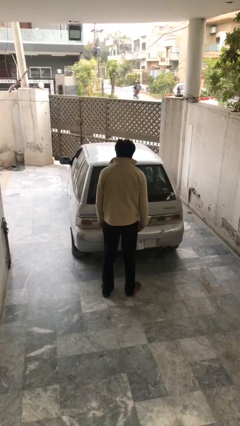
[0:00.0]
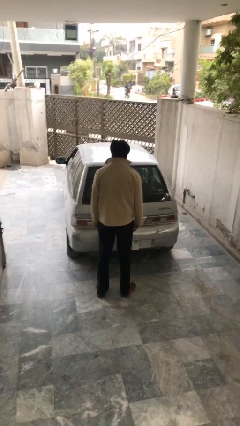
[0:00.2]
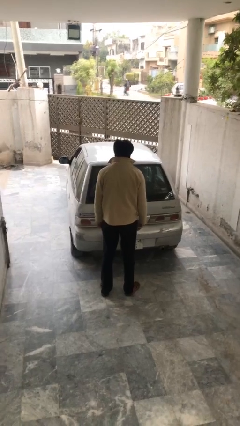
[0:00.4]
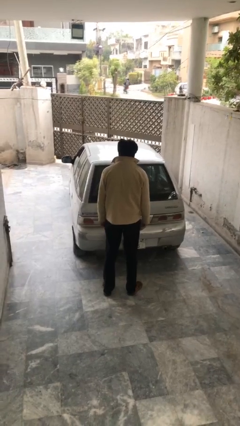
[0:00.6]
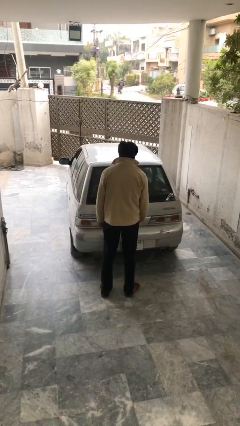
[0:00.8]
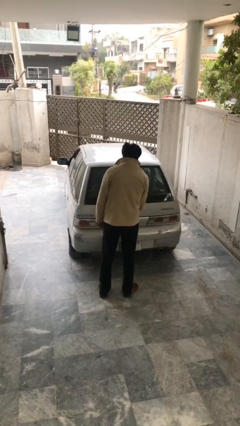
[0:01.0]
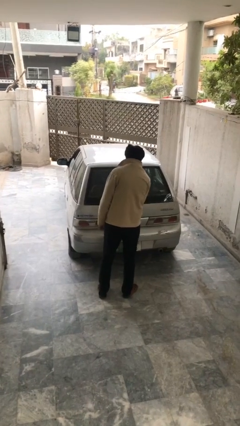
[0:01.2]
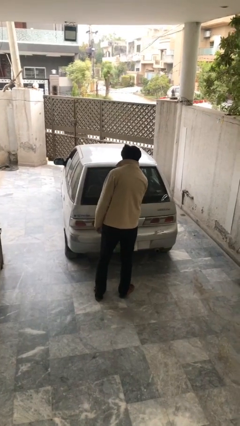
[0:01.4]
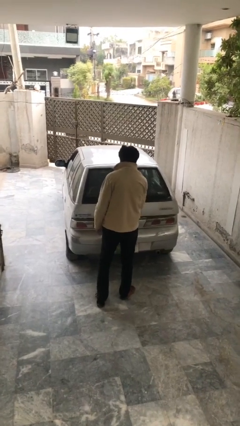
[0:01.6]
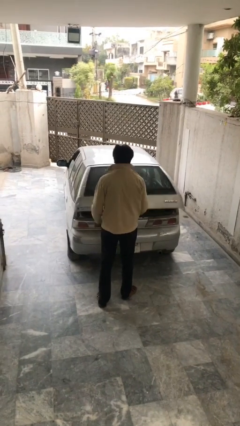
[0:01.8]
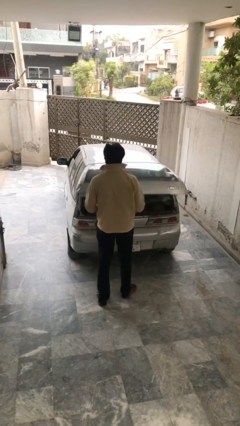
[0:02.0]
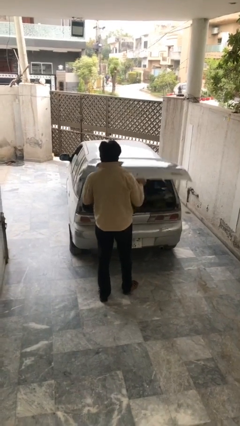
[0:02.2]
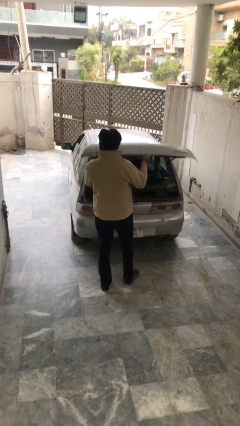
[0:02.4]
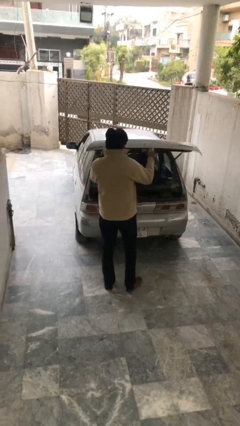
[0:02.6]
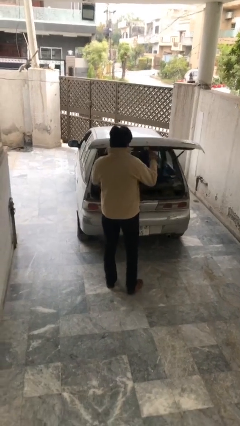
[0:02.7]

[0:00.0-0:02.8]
person opens car trunk

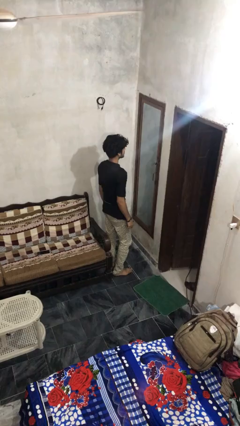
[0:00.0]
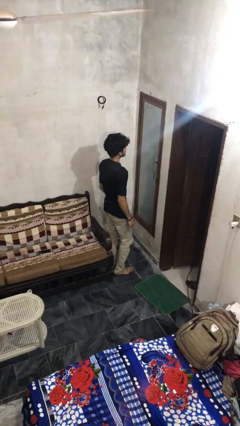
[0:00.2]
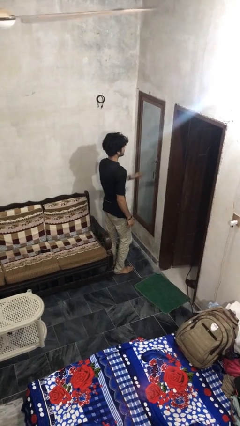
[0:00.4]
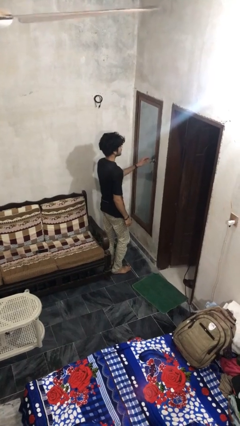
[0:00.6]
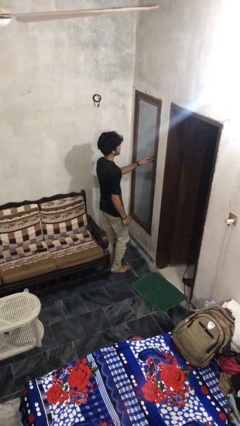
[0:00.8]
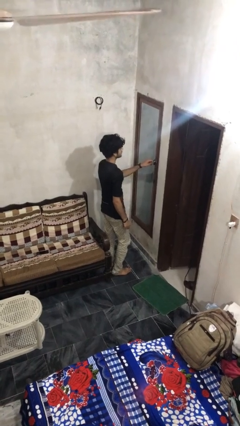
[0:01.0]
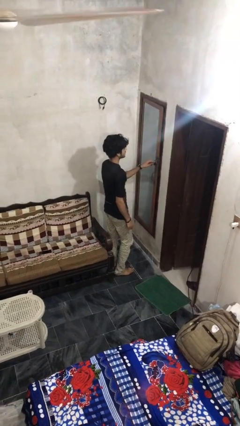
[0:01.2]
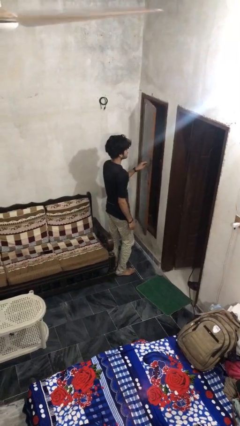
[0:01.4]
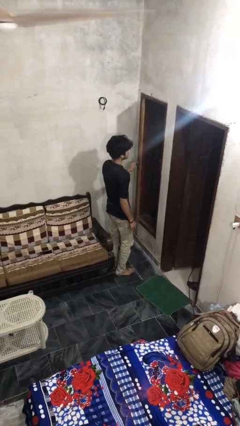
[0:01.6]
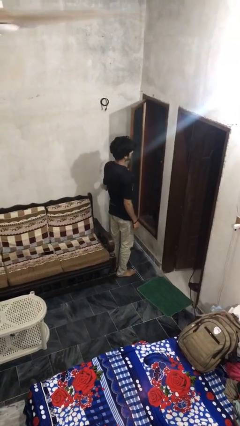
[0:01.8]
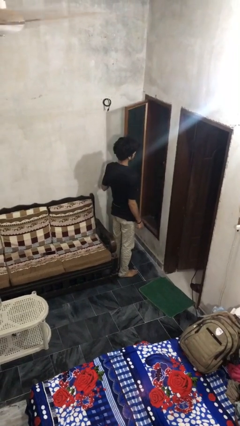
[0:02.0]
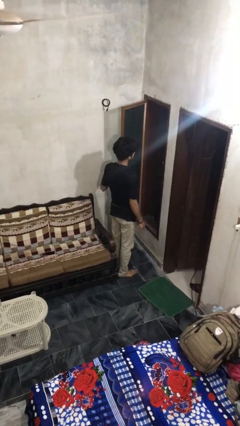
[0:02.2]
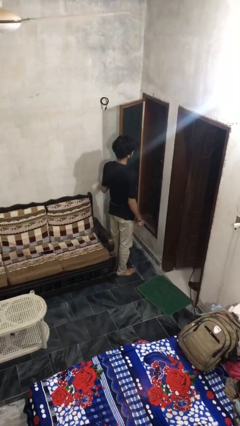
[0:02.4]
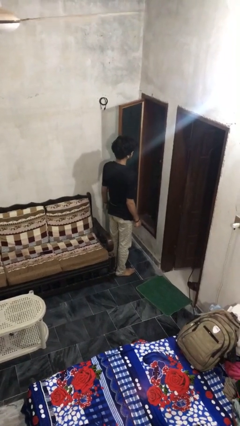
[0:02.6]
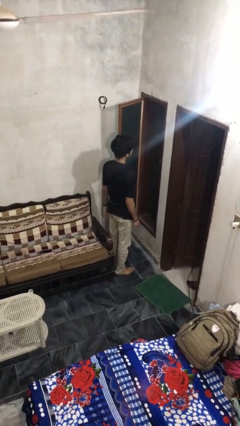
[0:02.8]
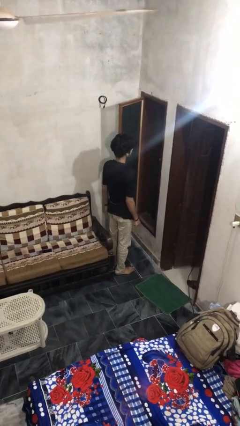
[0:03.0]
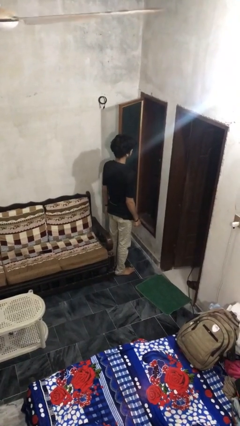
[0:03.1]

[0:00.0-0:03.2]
person opens home window

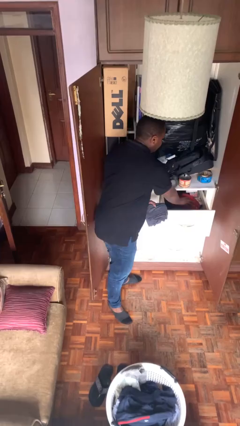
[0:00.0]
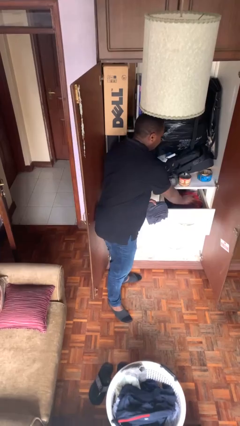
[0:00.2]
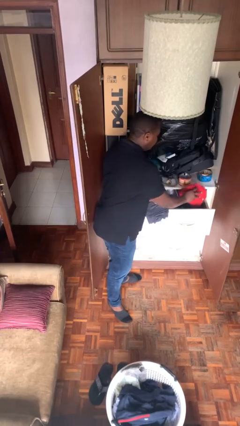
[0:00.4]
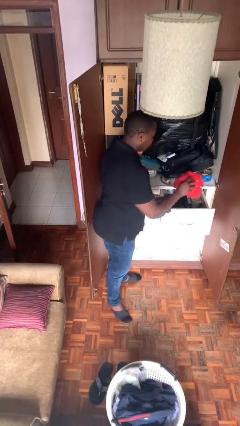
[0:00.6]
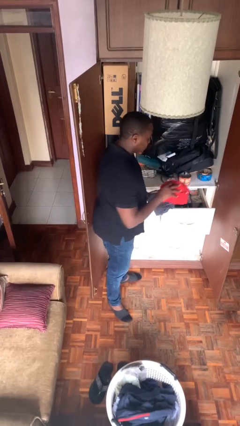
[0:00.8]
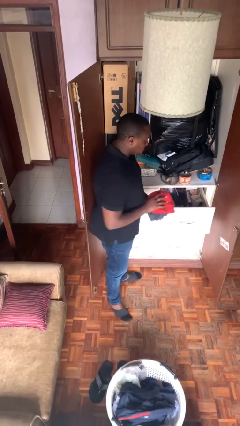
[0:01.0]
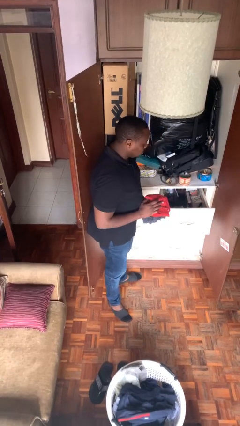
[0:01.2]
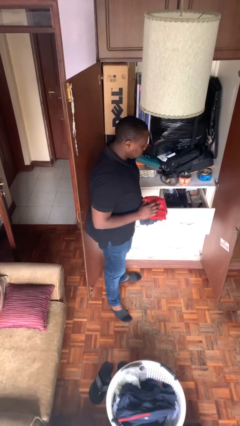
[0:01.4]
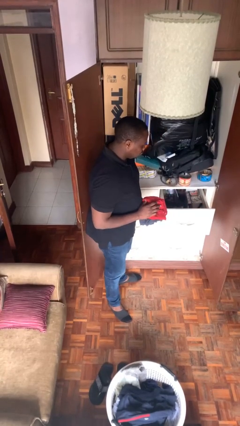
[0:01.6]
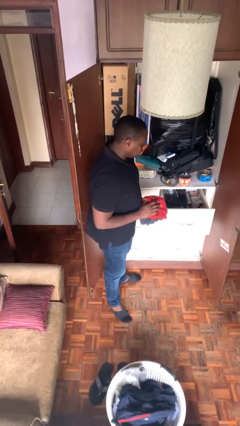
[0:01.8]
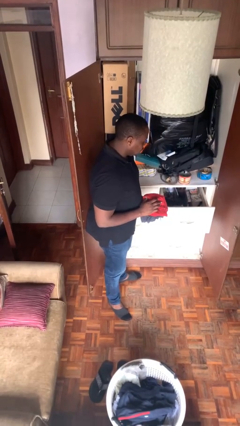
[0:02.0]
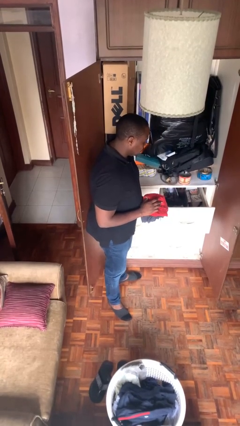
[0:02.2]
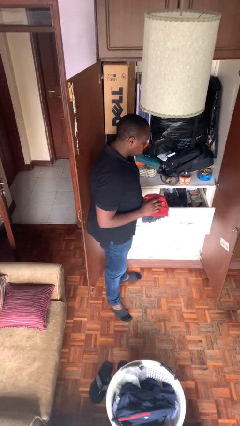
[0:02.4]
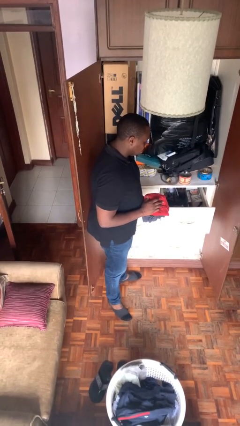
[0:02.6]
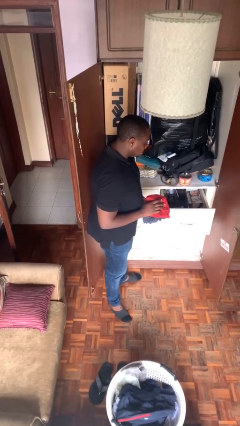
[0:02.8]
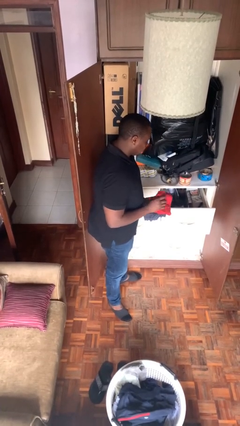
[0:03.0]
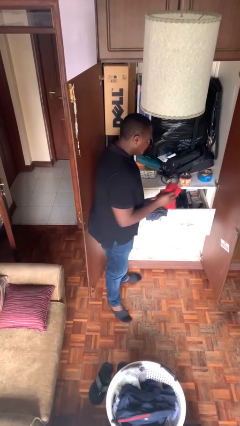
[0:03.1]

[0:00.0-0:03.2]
person takes clothes from dresser

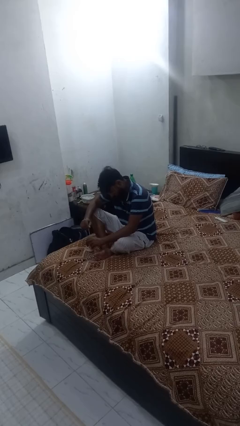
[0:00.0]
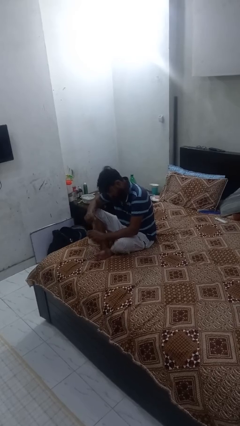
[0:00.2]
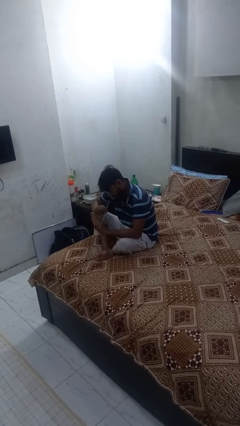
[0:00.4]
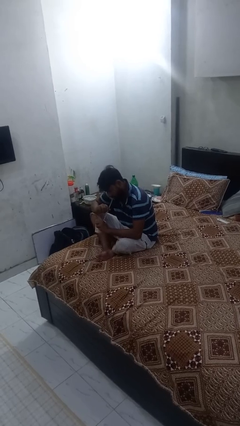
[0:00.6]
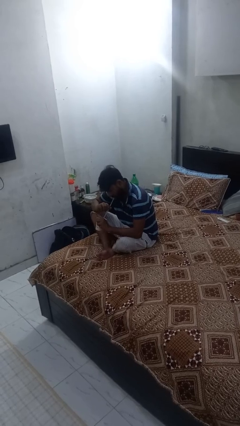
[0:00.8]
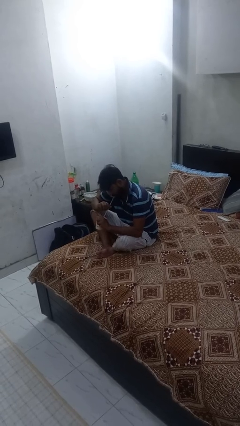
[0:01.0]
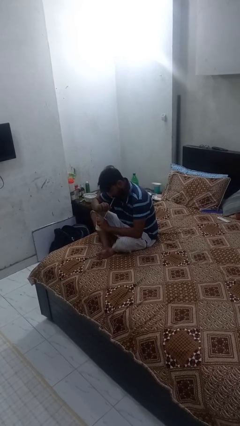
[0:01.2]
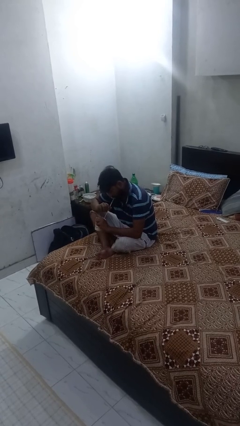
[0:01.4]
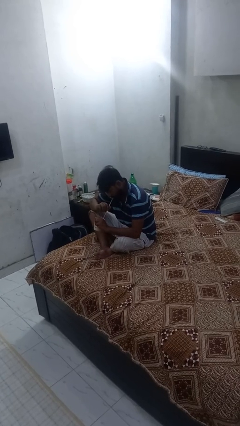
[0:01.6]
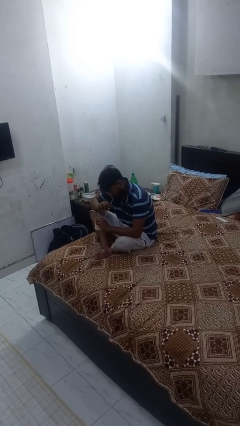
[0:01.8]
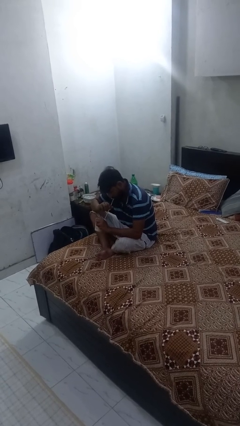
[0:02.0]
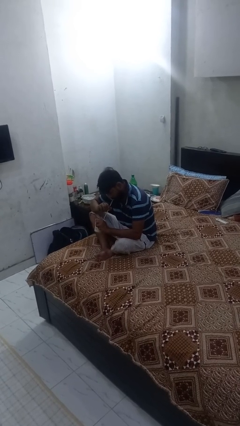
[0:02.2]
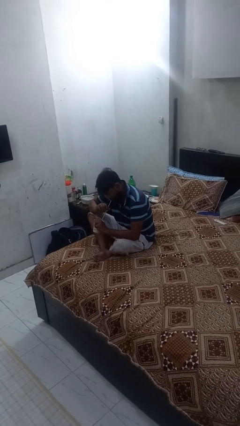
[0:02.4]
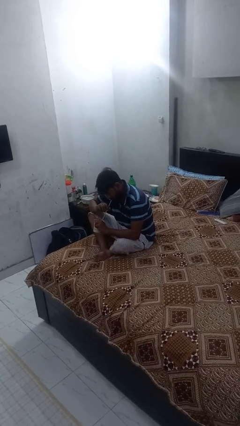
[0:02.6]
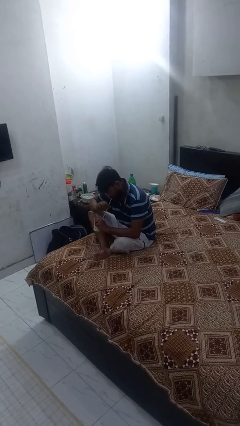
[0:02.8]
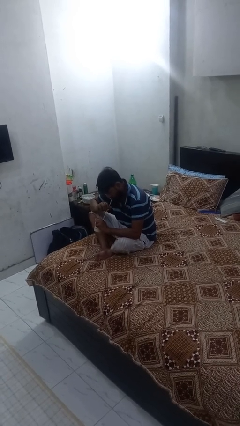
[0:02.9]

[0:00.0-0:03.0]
person drinks from straw

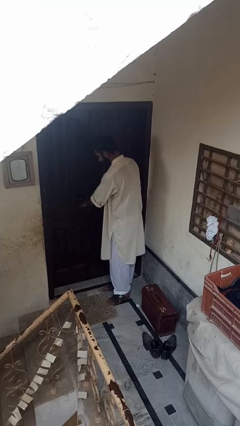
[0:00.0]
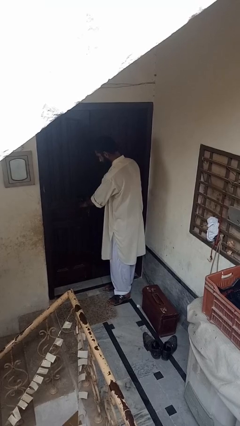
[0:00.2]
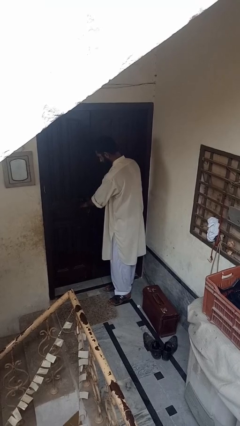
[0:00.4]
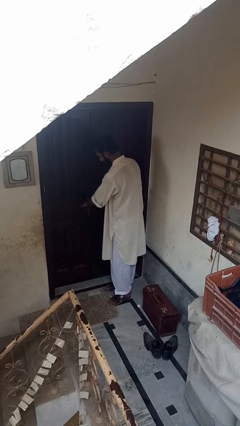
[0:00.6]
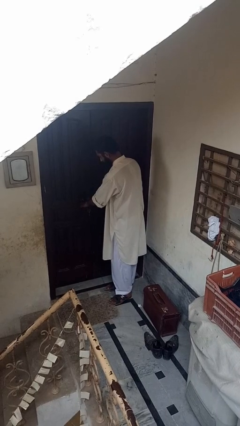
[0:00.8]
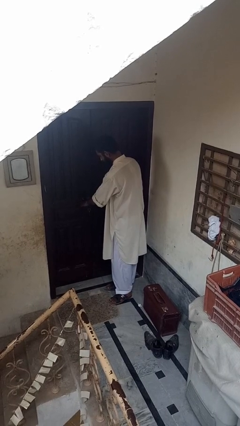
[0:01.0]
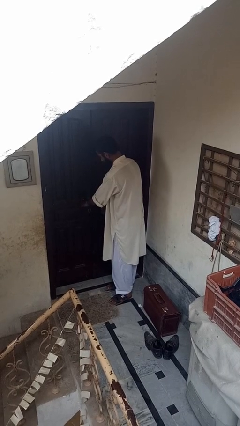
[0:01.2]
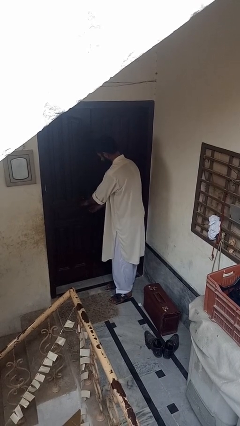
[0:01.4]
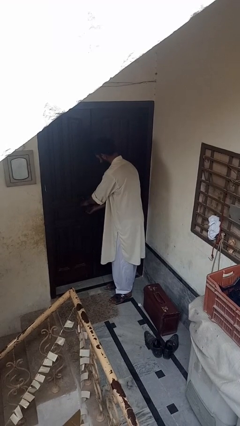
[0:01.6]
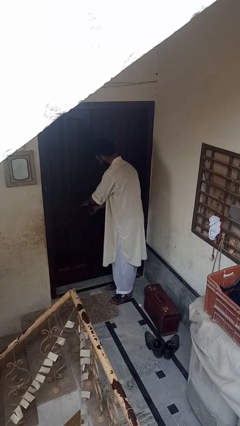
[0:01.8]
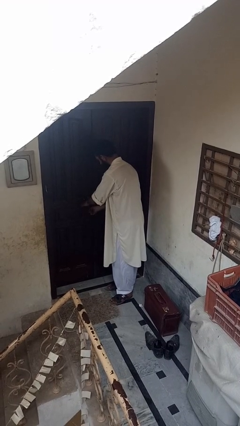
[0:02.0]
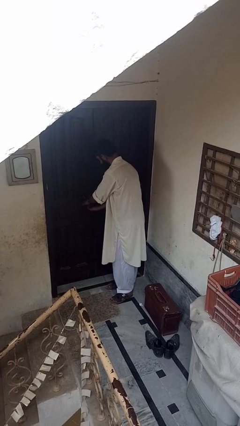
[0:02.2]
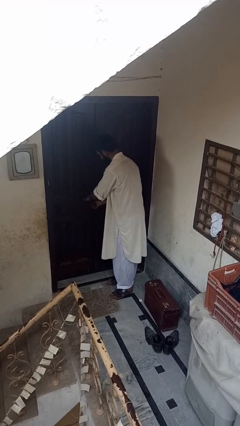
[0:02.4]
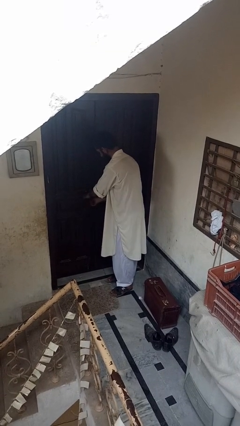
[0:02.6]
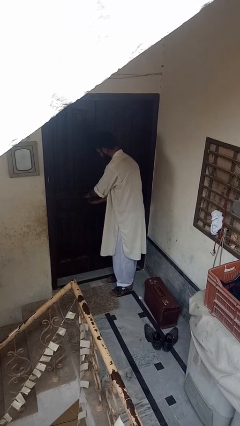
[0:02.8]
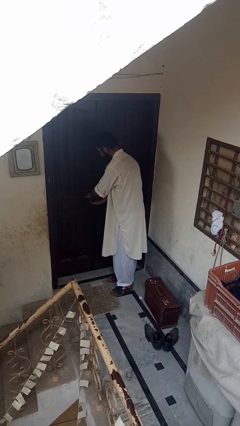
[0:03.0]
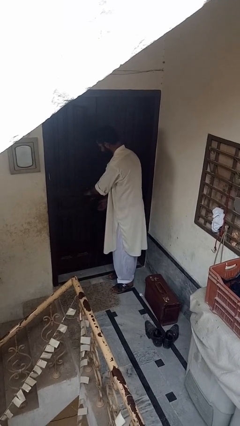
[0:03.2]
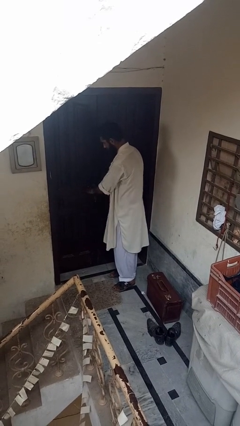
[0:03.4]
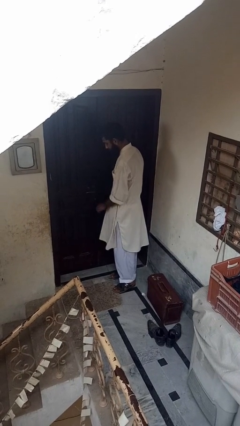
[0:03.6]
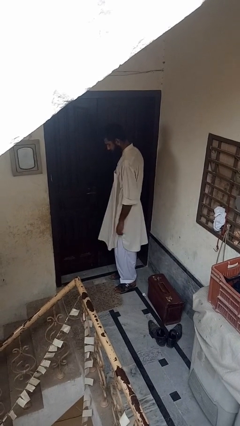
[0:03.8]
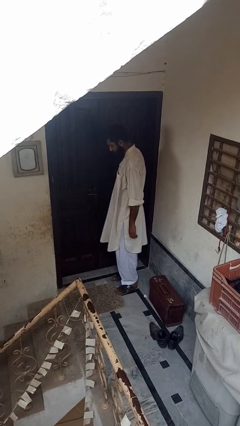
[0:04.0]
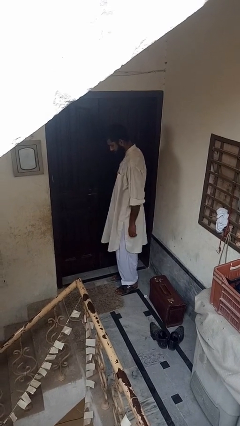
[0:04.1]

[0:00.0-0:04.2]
person locks door with keys

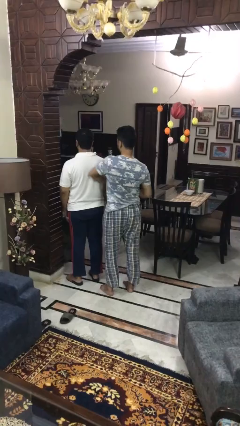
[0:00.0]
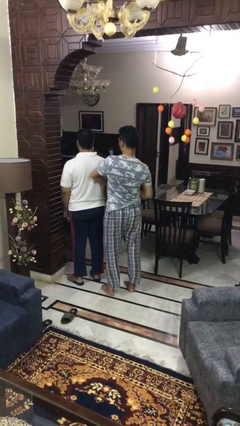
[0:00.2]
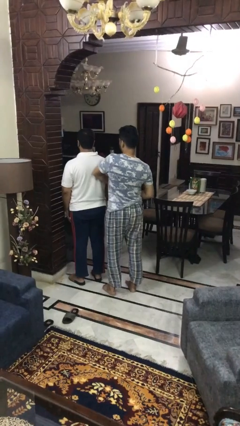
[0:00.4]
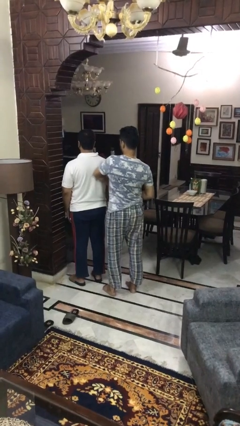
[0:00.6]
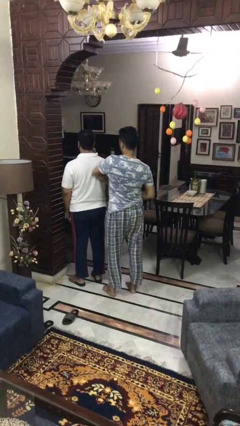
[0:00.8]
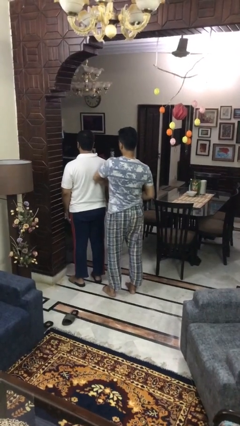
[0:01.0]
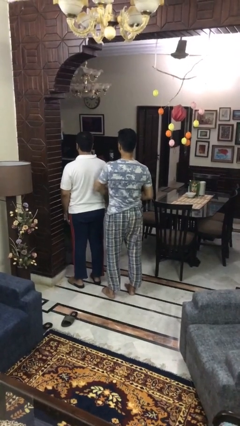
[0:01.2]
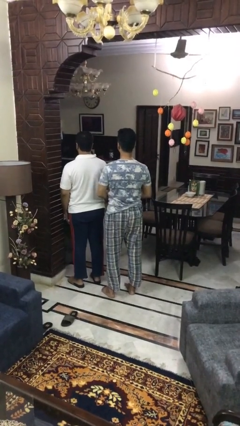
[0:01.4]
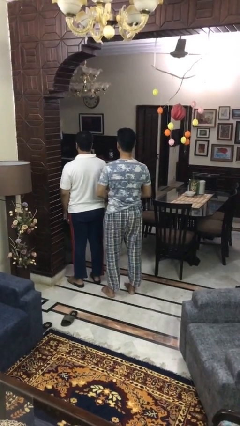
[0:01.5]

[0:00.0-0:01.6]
person nudges person with elbow
